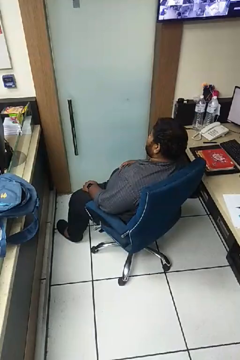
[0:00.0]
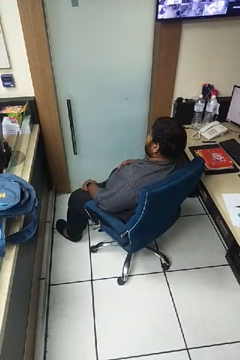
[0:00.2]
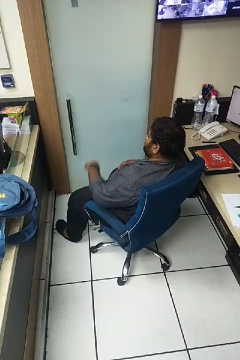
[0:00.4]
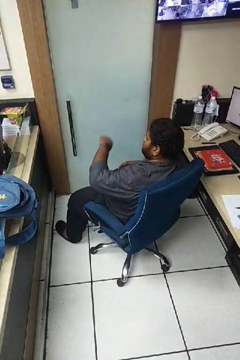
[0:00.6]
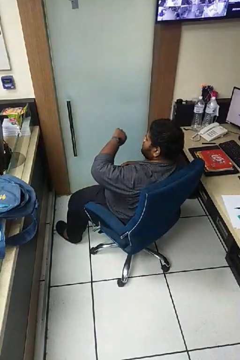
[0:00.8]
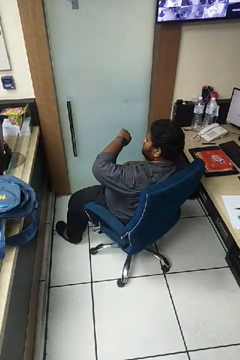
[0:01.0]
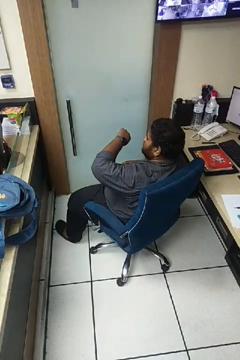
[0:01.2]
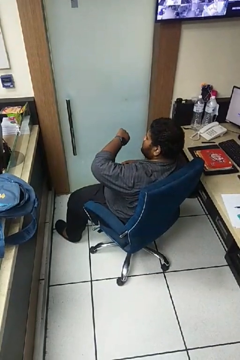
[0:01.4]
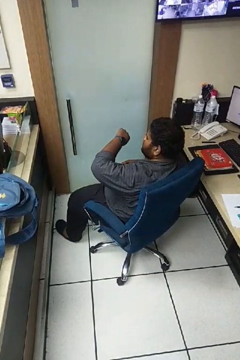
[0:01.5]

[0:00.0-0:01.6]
person looks at wristwatch

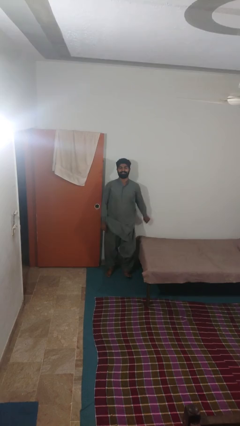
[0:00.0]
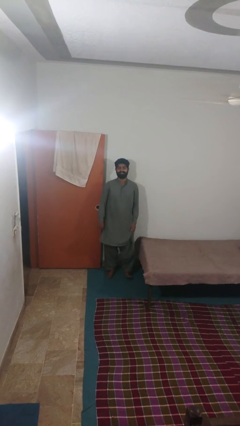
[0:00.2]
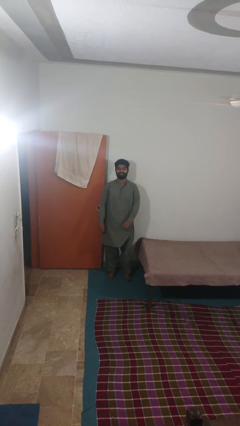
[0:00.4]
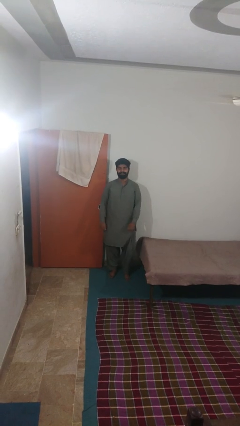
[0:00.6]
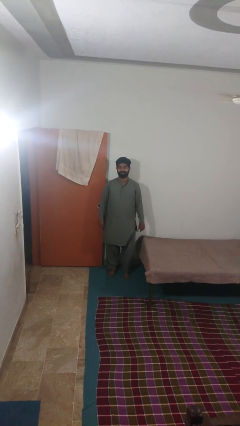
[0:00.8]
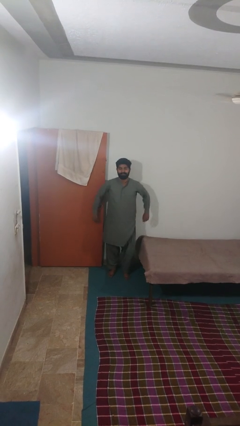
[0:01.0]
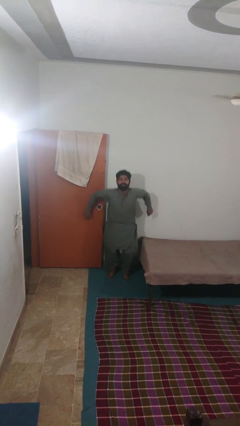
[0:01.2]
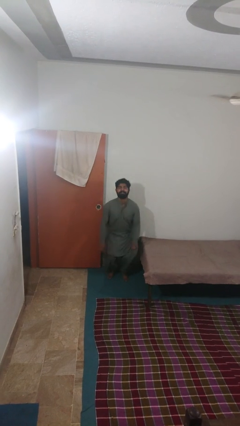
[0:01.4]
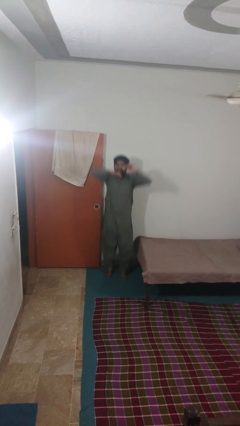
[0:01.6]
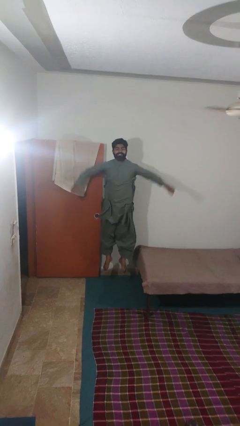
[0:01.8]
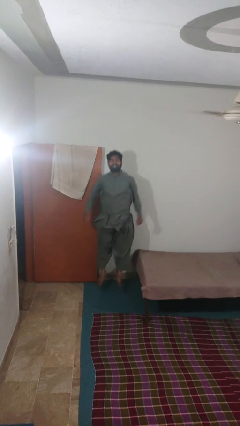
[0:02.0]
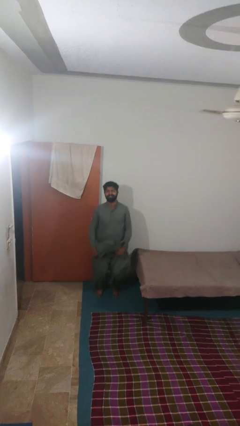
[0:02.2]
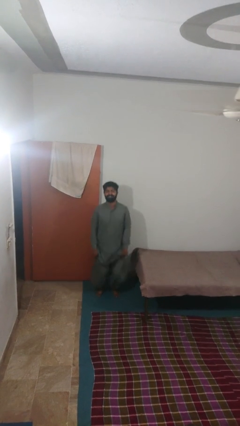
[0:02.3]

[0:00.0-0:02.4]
person jumps

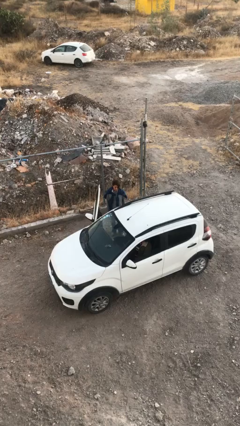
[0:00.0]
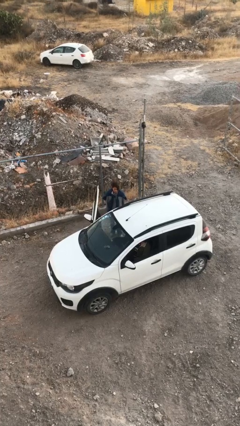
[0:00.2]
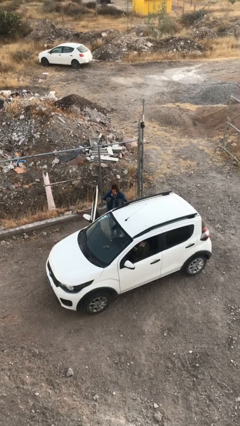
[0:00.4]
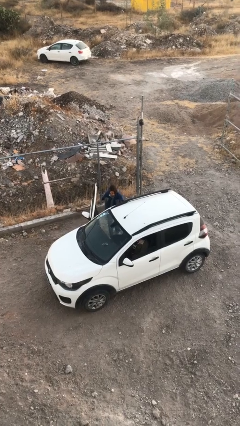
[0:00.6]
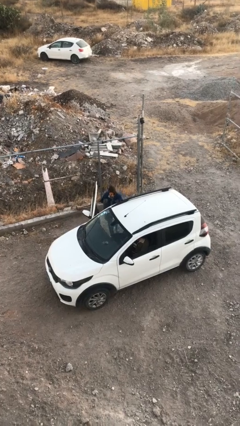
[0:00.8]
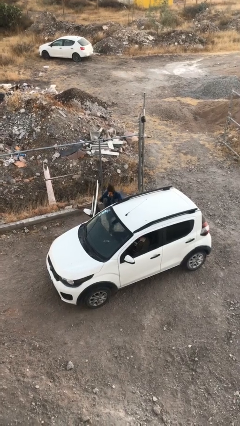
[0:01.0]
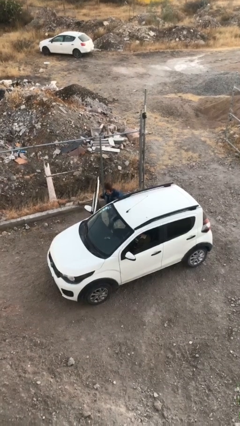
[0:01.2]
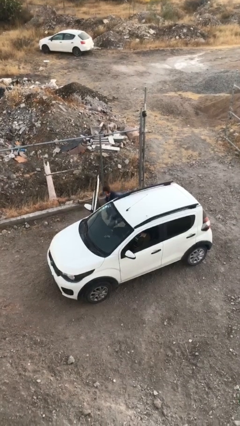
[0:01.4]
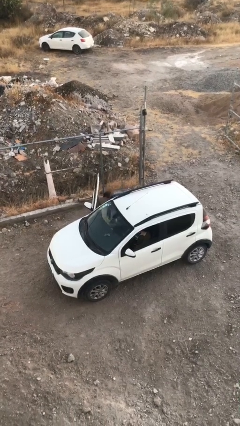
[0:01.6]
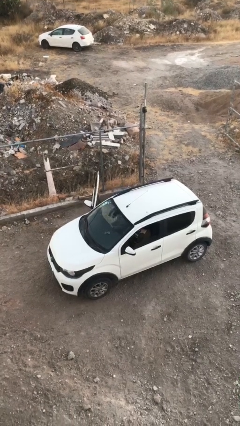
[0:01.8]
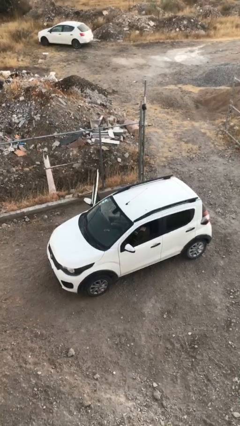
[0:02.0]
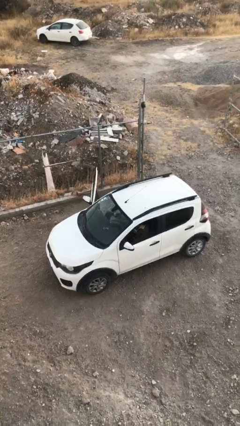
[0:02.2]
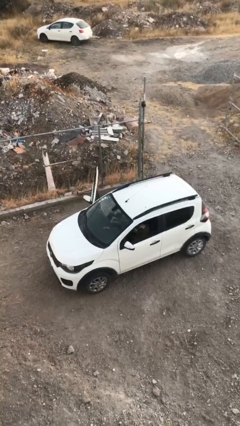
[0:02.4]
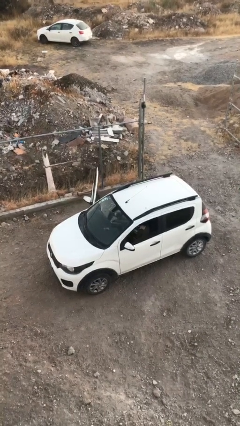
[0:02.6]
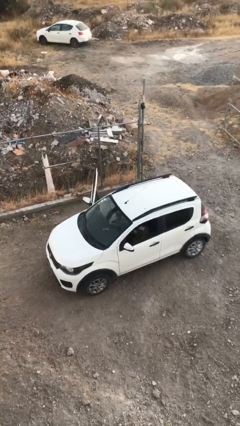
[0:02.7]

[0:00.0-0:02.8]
person enters car

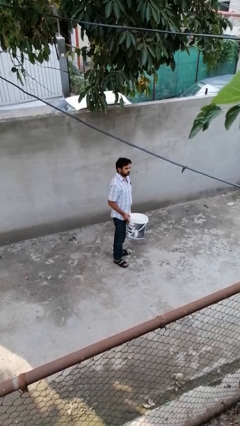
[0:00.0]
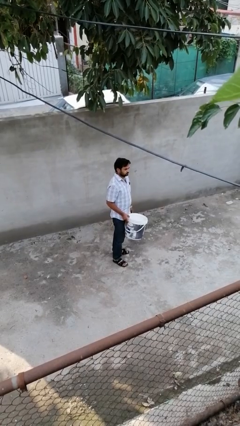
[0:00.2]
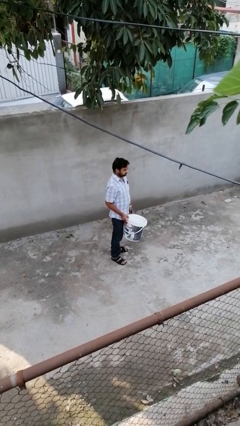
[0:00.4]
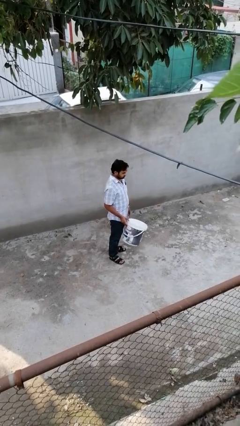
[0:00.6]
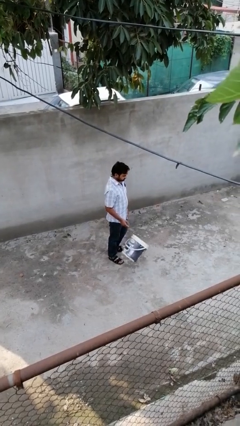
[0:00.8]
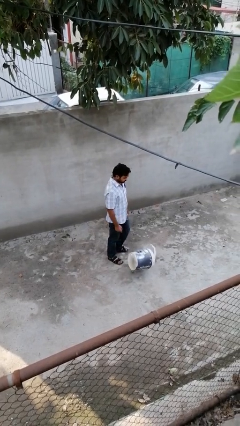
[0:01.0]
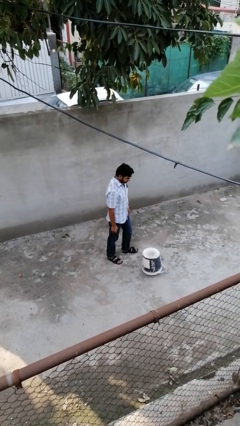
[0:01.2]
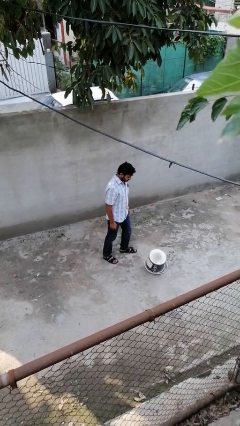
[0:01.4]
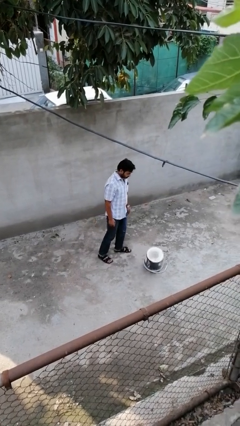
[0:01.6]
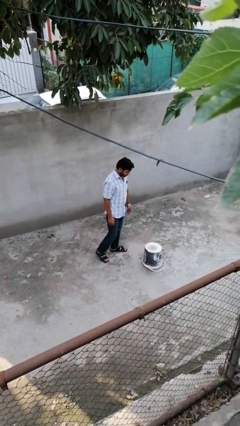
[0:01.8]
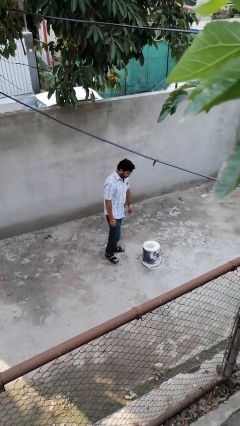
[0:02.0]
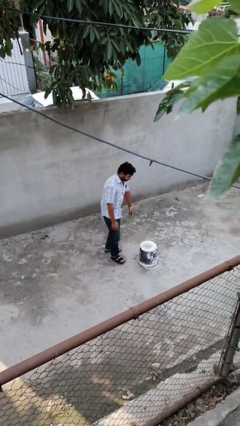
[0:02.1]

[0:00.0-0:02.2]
person drops object

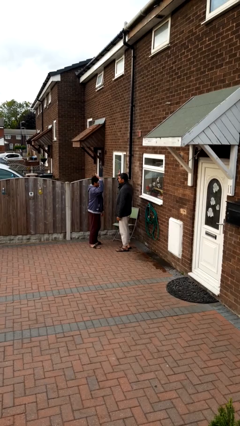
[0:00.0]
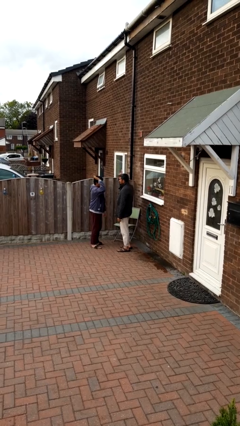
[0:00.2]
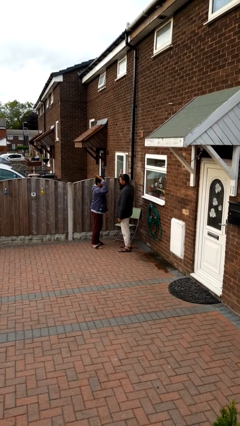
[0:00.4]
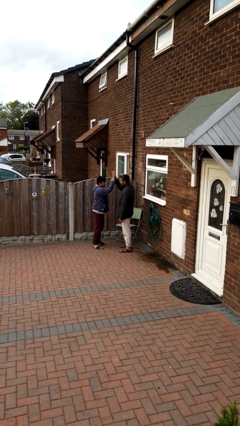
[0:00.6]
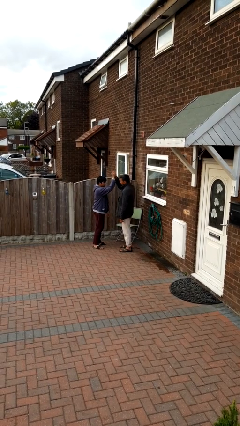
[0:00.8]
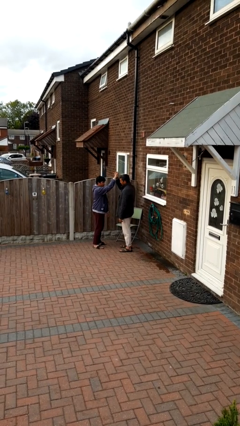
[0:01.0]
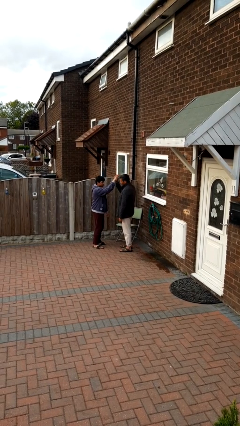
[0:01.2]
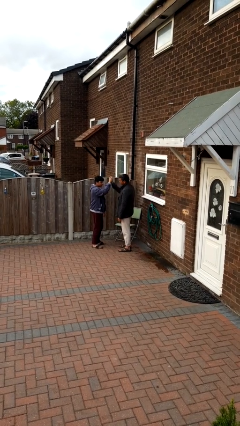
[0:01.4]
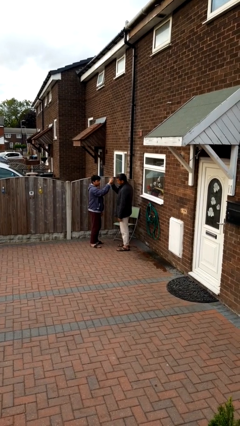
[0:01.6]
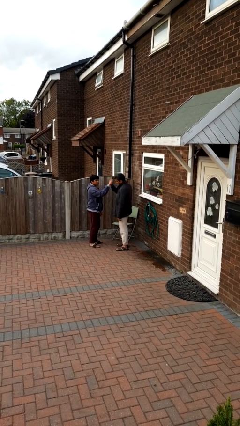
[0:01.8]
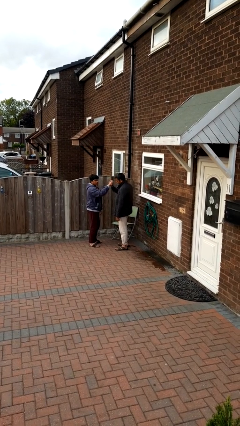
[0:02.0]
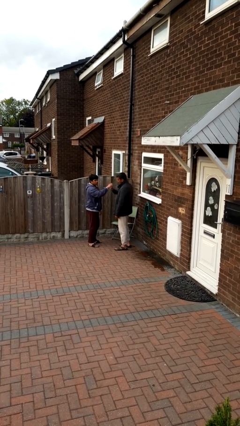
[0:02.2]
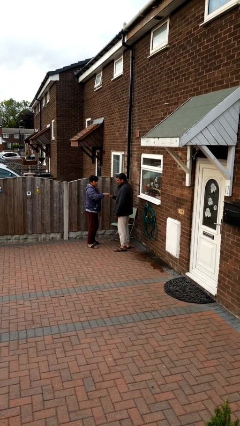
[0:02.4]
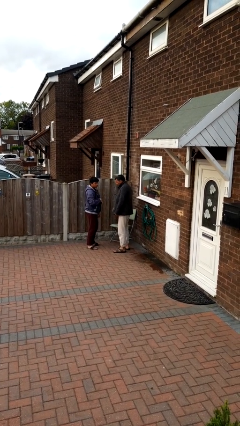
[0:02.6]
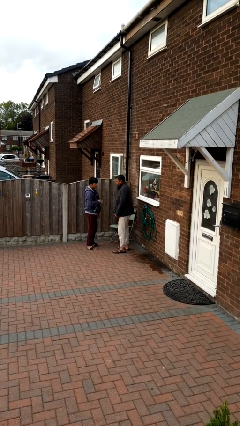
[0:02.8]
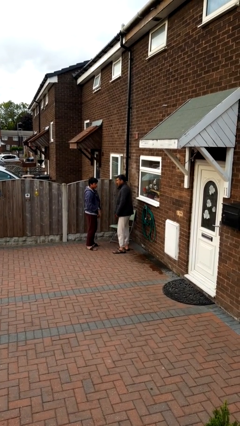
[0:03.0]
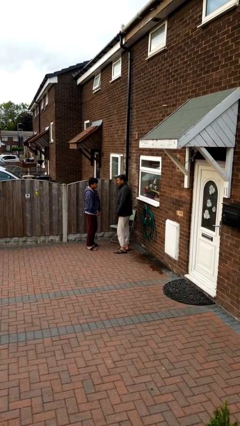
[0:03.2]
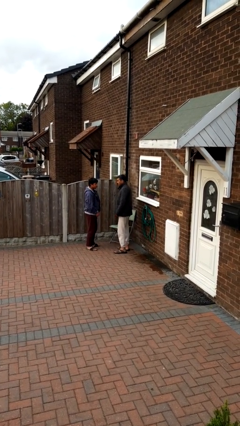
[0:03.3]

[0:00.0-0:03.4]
person highfives hand

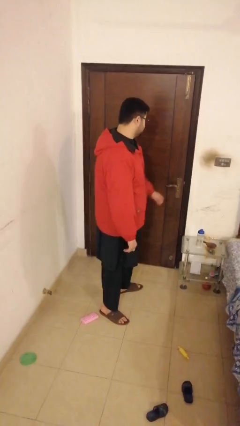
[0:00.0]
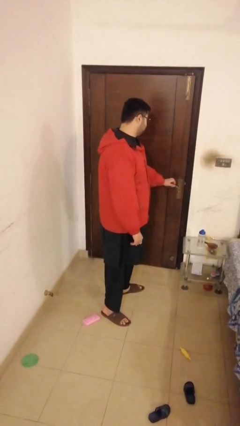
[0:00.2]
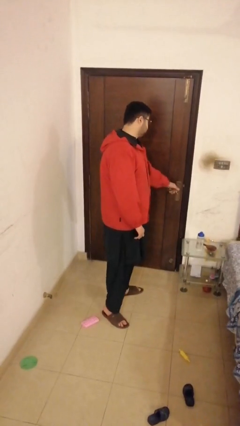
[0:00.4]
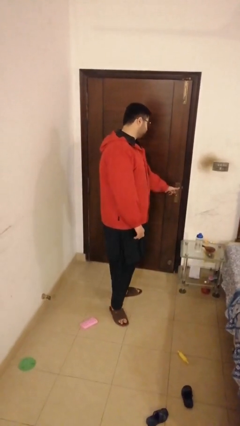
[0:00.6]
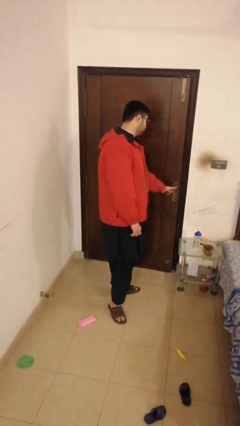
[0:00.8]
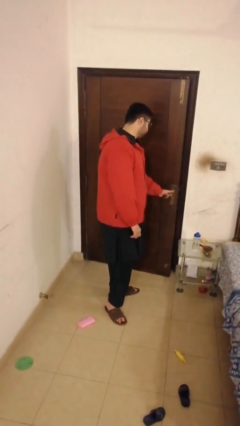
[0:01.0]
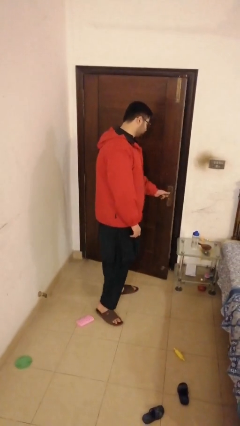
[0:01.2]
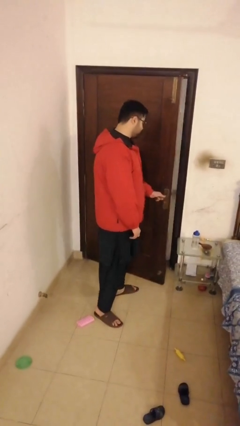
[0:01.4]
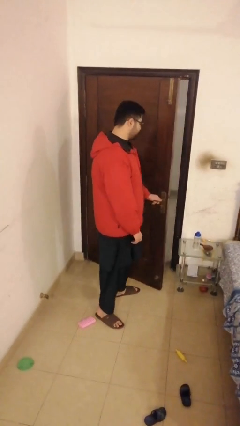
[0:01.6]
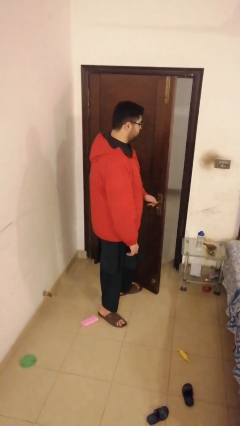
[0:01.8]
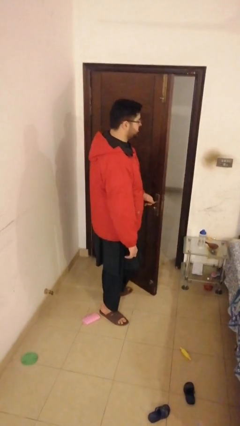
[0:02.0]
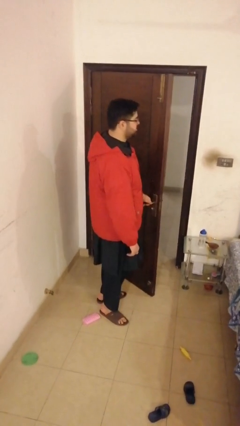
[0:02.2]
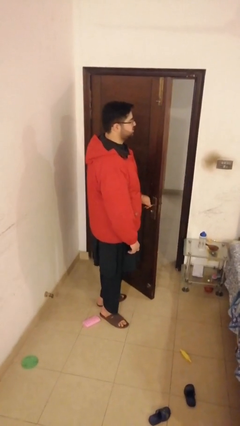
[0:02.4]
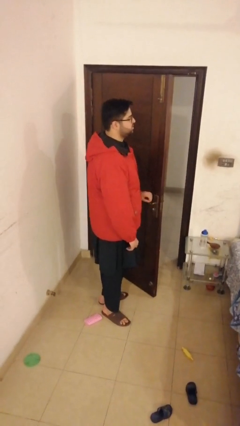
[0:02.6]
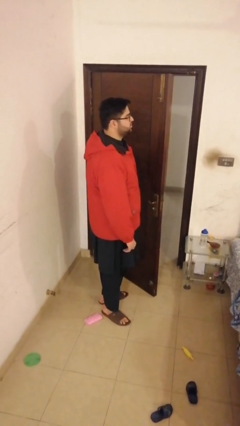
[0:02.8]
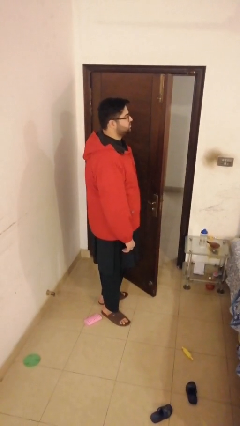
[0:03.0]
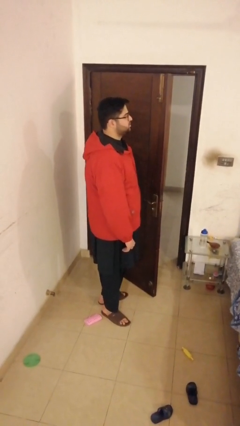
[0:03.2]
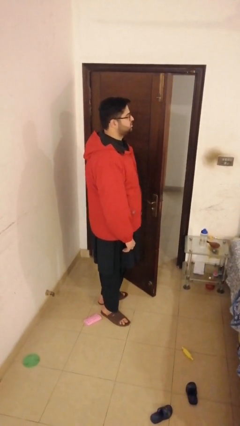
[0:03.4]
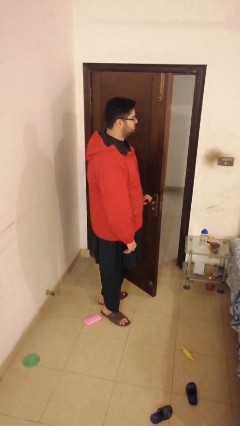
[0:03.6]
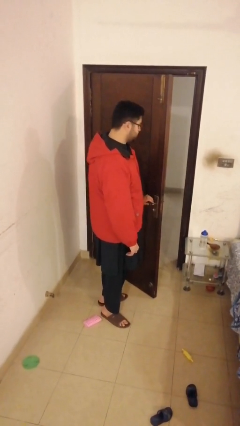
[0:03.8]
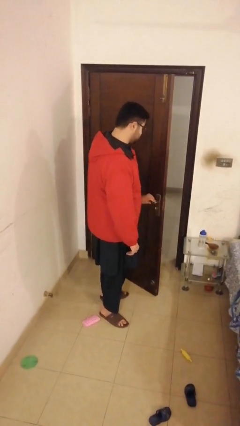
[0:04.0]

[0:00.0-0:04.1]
person opens facility door

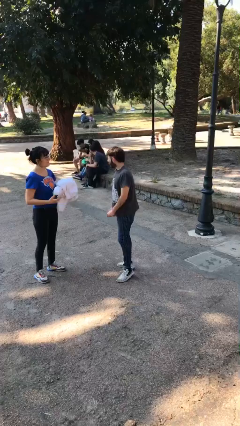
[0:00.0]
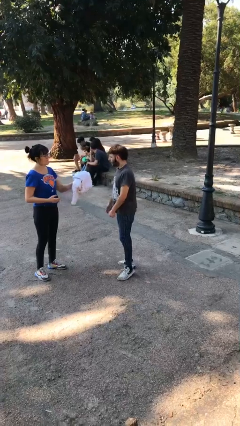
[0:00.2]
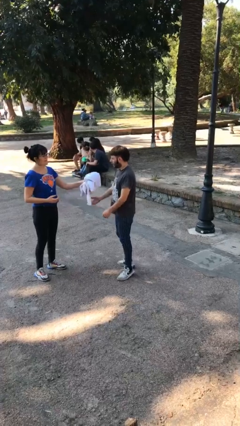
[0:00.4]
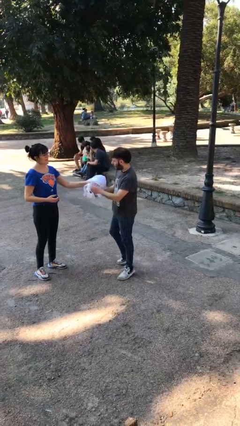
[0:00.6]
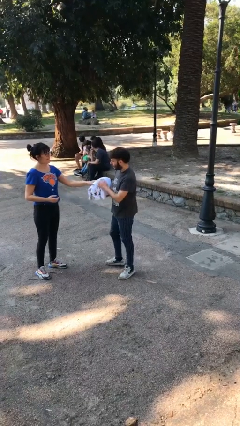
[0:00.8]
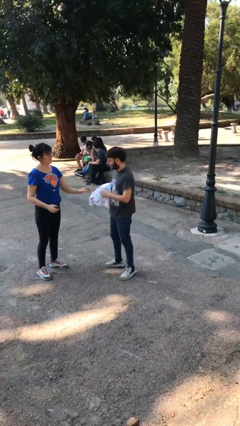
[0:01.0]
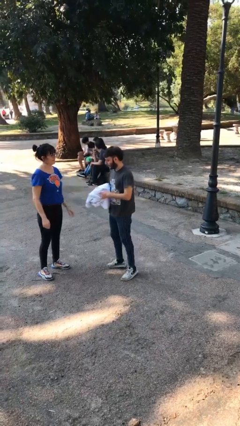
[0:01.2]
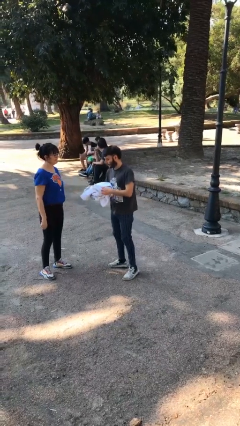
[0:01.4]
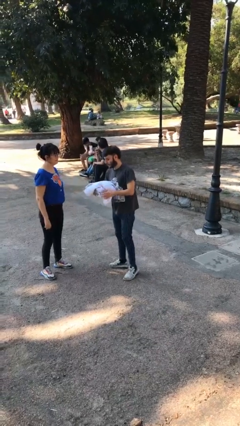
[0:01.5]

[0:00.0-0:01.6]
person transfers object to person
